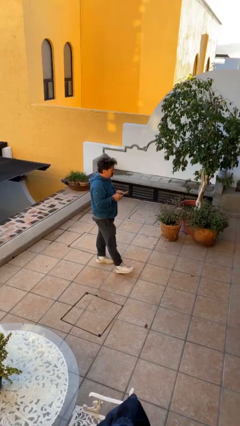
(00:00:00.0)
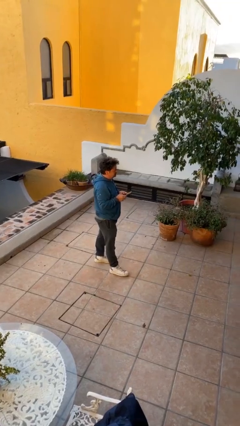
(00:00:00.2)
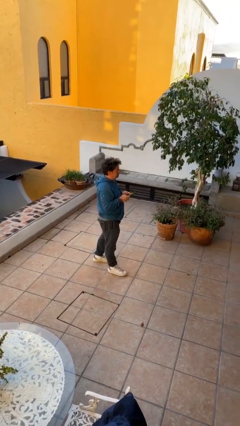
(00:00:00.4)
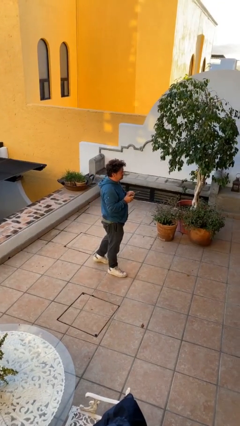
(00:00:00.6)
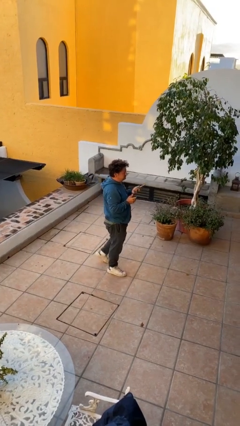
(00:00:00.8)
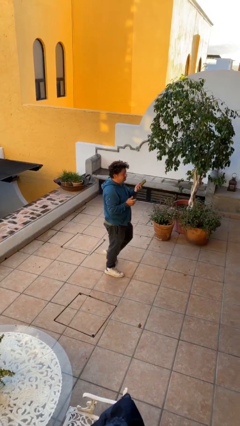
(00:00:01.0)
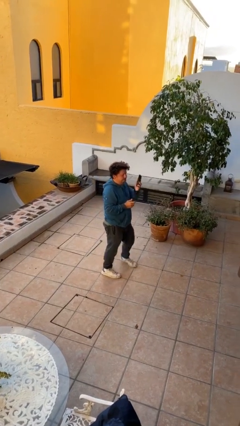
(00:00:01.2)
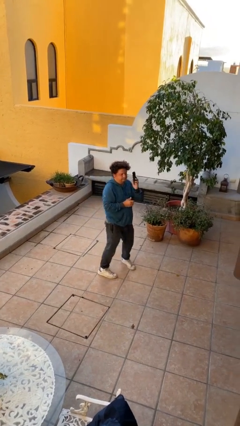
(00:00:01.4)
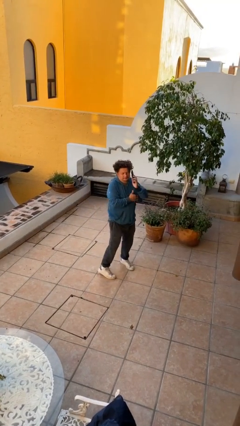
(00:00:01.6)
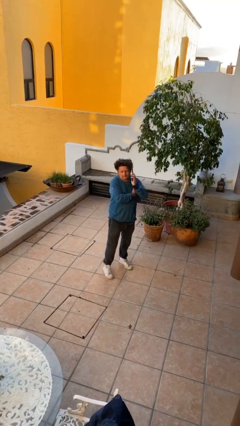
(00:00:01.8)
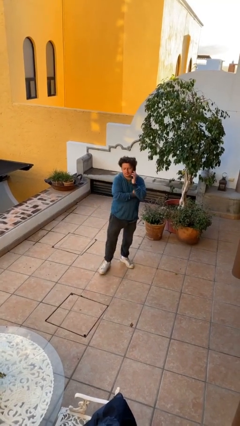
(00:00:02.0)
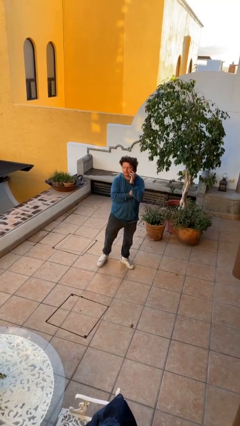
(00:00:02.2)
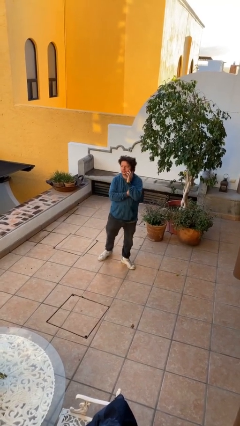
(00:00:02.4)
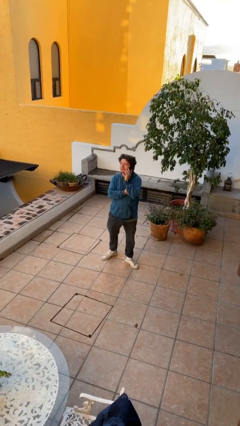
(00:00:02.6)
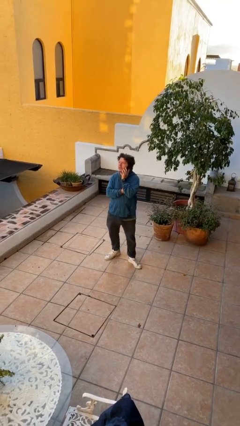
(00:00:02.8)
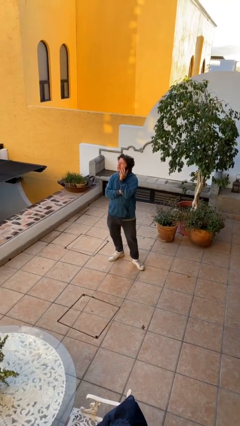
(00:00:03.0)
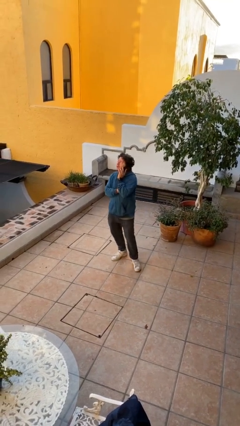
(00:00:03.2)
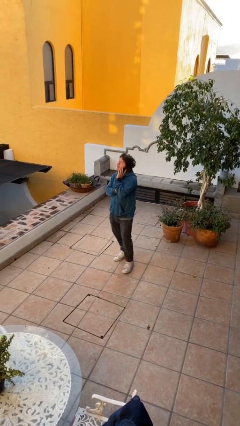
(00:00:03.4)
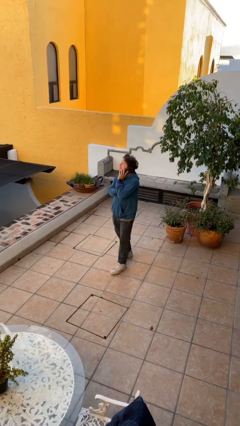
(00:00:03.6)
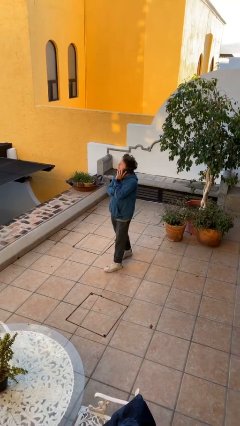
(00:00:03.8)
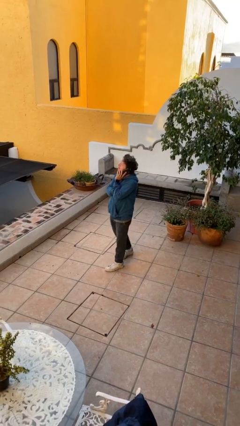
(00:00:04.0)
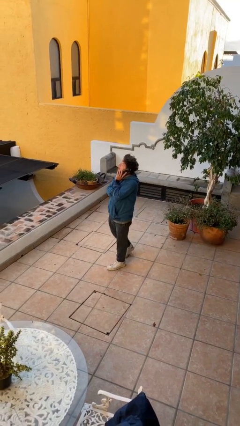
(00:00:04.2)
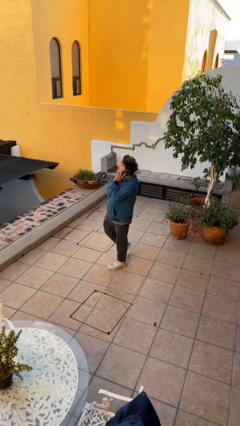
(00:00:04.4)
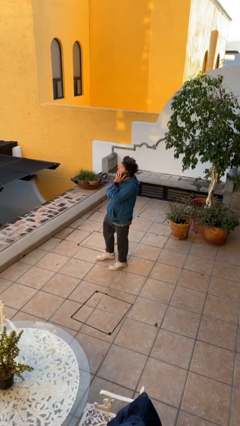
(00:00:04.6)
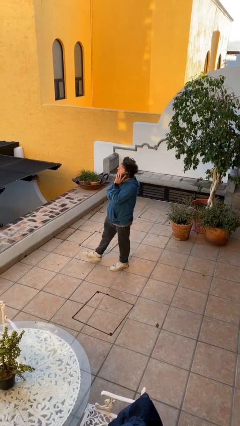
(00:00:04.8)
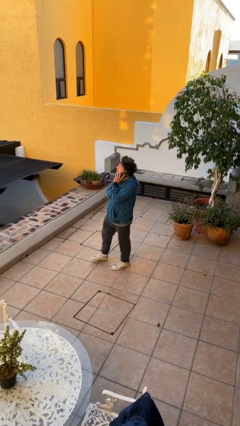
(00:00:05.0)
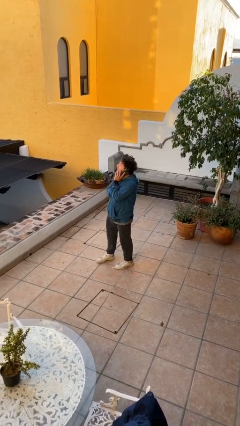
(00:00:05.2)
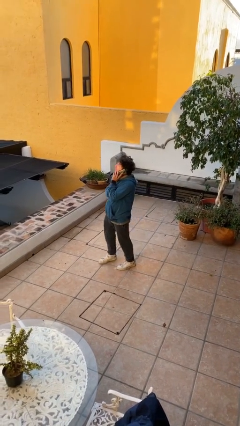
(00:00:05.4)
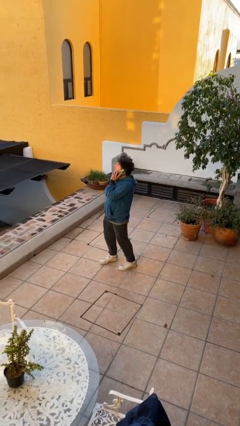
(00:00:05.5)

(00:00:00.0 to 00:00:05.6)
person talks on phone

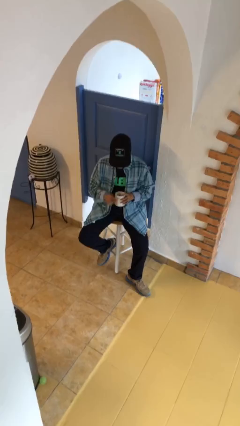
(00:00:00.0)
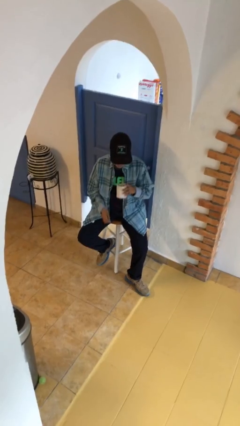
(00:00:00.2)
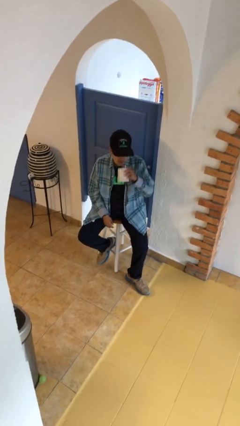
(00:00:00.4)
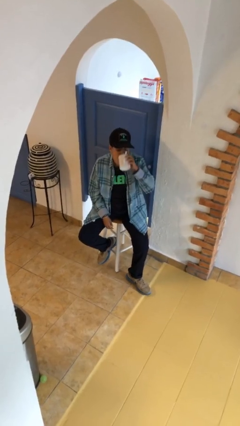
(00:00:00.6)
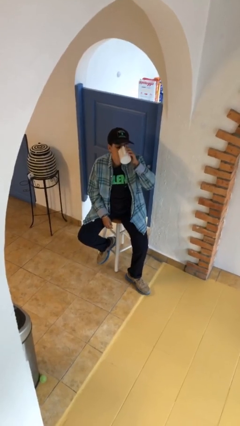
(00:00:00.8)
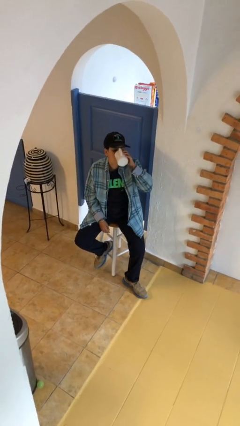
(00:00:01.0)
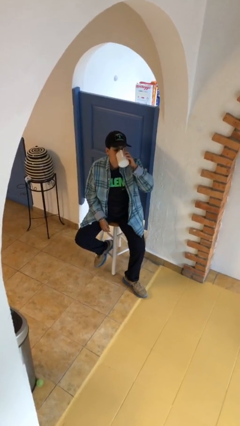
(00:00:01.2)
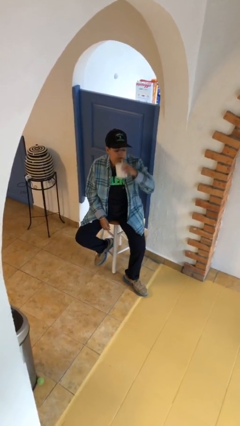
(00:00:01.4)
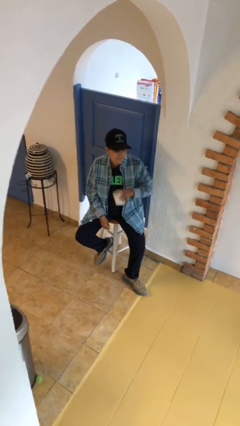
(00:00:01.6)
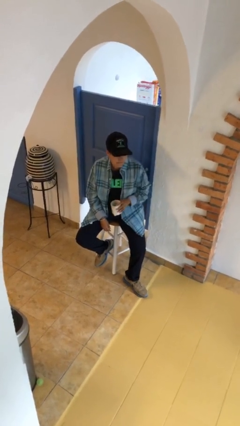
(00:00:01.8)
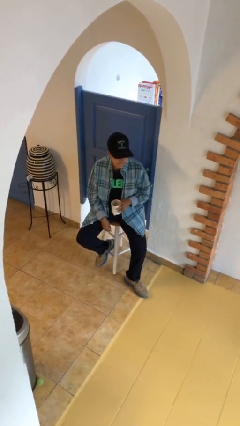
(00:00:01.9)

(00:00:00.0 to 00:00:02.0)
person drinks from mug

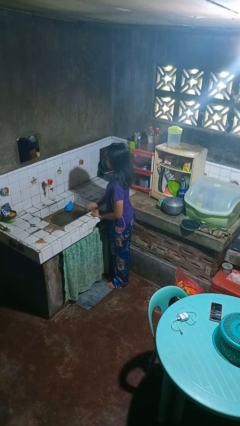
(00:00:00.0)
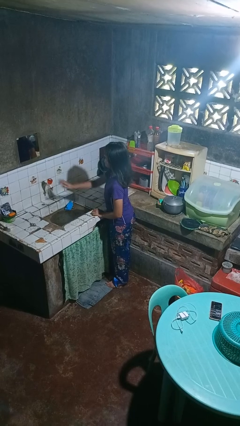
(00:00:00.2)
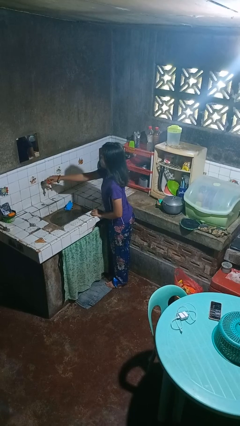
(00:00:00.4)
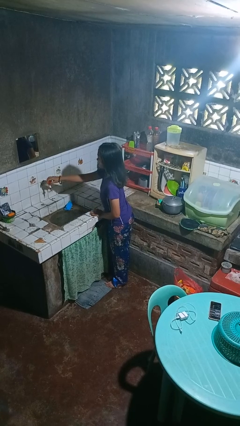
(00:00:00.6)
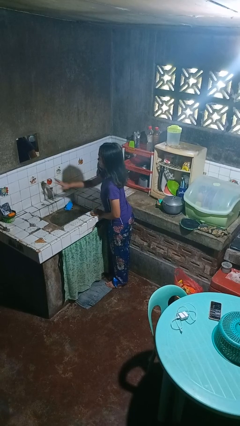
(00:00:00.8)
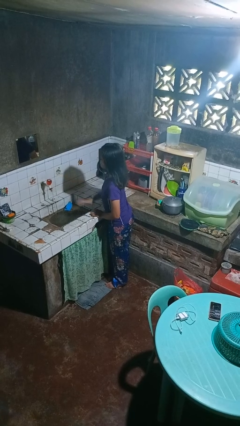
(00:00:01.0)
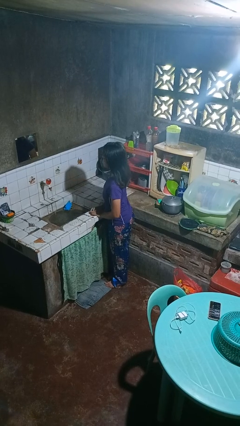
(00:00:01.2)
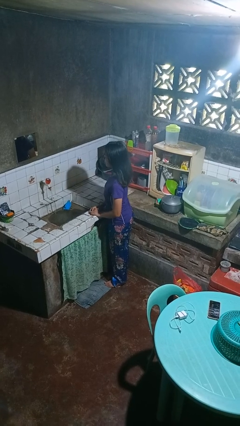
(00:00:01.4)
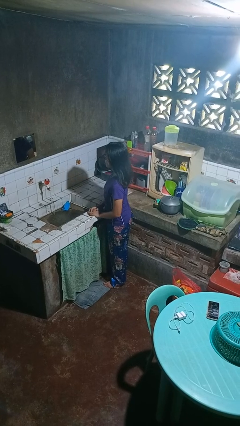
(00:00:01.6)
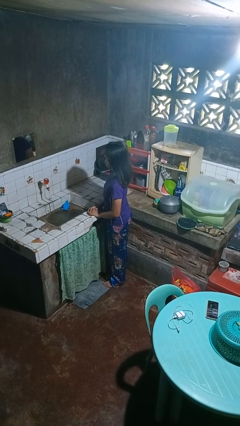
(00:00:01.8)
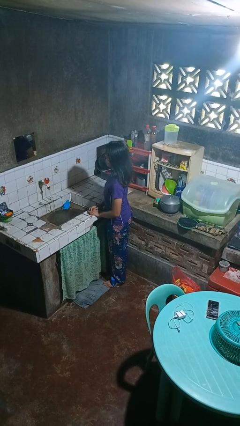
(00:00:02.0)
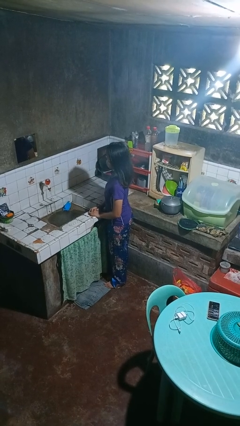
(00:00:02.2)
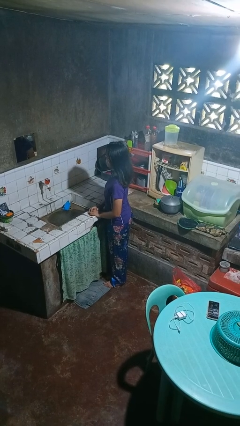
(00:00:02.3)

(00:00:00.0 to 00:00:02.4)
person turns on faucet

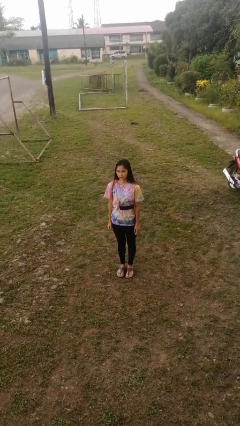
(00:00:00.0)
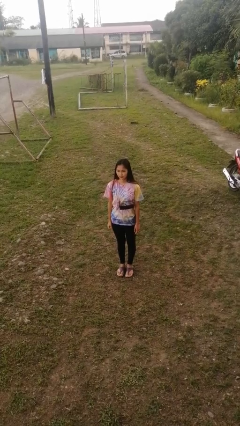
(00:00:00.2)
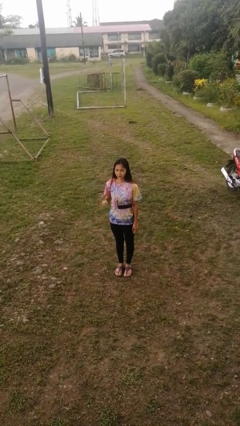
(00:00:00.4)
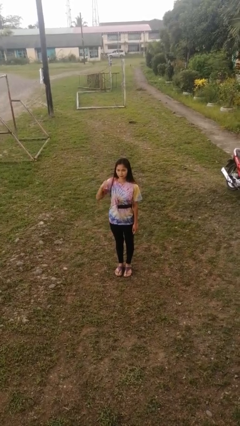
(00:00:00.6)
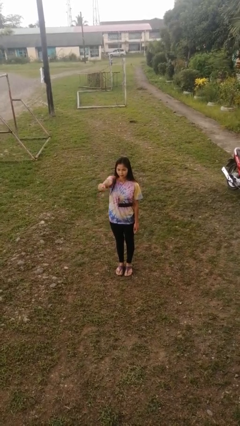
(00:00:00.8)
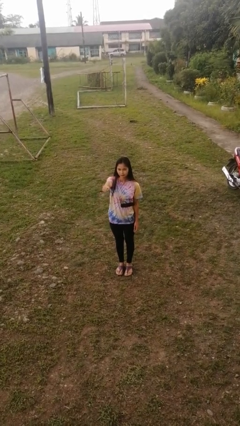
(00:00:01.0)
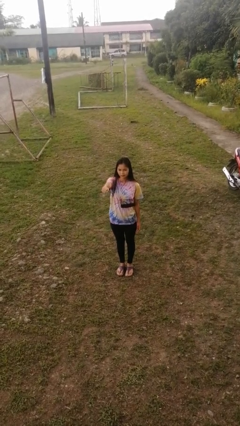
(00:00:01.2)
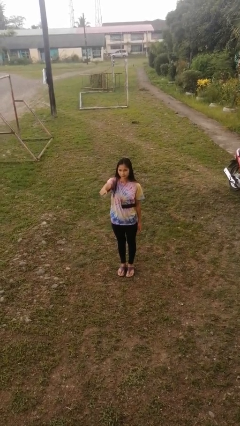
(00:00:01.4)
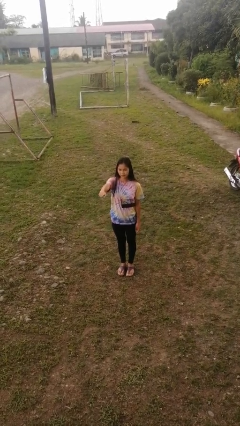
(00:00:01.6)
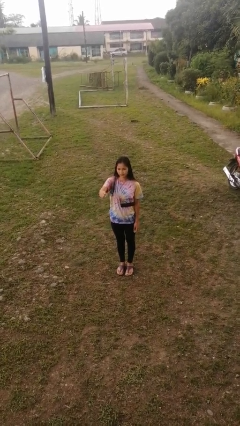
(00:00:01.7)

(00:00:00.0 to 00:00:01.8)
person punches

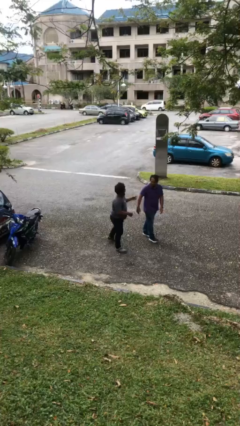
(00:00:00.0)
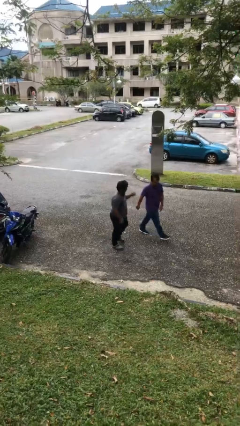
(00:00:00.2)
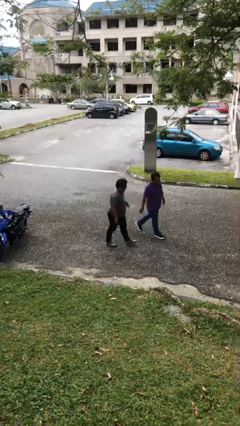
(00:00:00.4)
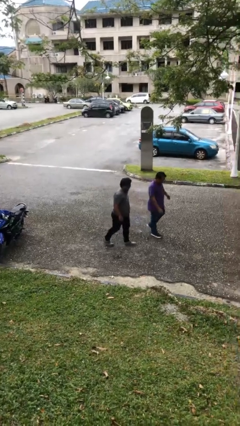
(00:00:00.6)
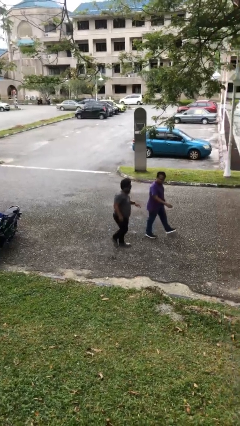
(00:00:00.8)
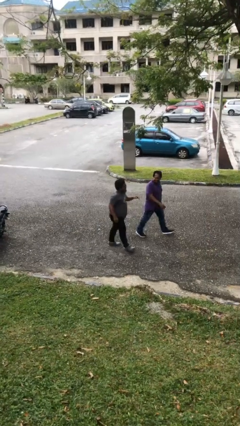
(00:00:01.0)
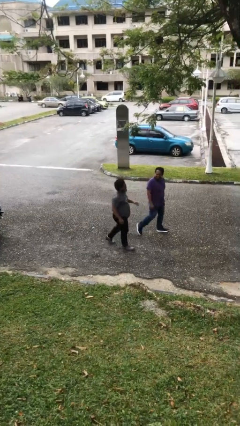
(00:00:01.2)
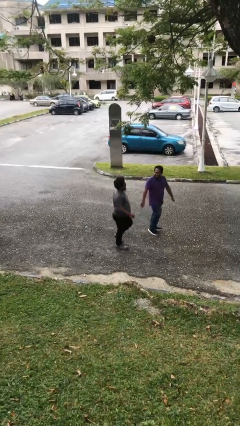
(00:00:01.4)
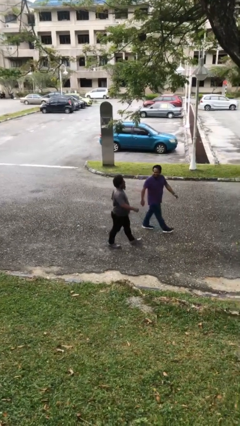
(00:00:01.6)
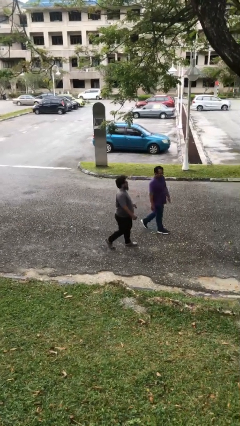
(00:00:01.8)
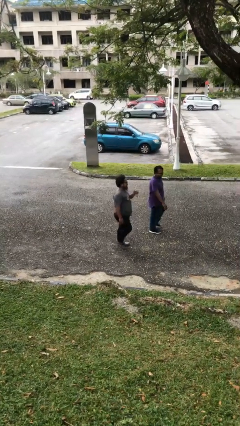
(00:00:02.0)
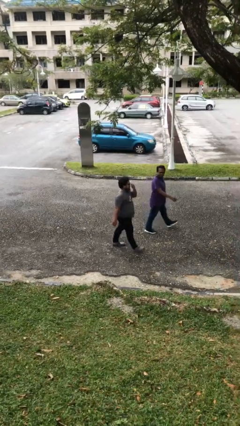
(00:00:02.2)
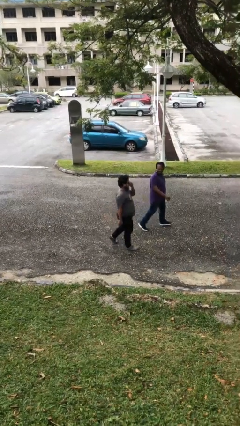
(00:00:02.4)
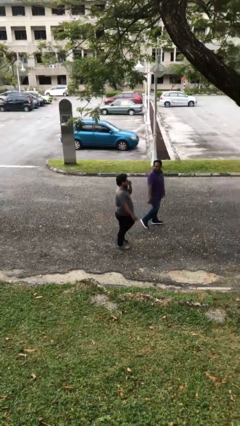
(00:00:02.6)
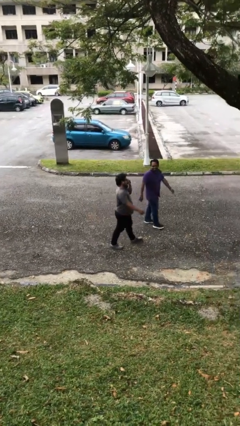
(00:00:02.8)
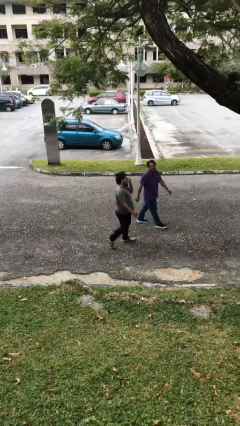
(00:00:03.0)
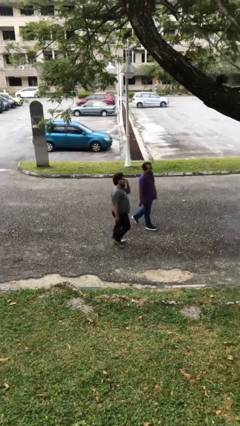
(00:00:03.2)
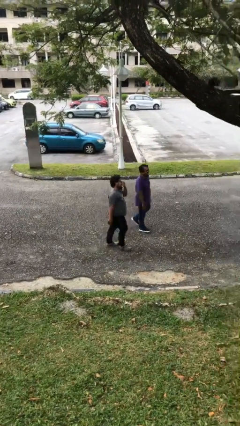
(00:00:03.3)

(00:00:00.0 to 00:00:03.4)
person talks to person

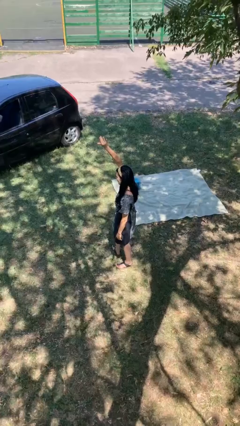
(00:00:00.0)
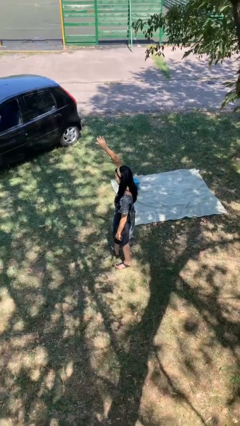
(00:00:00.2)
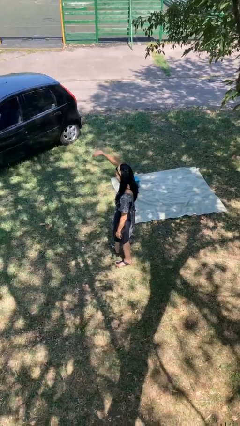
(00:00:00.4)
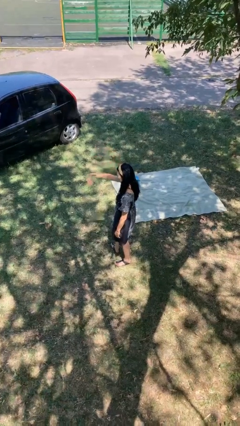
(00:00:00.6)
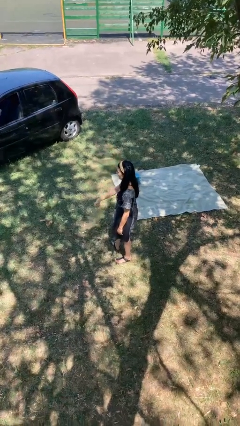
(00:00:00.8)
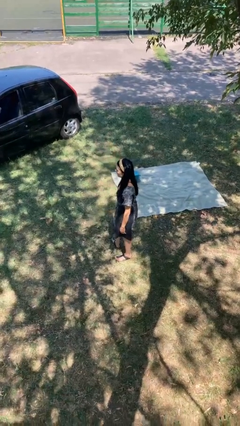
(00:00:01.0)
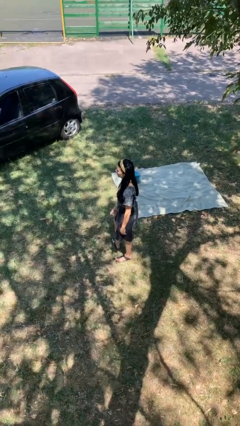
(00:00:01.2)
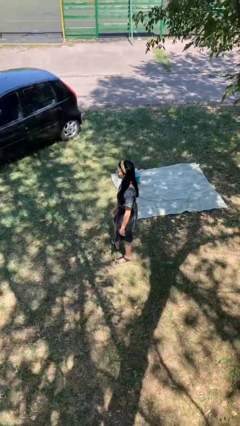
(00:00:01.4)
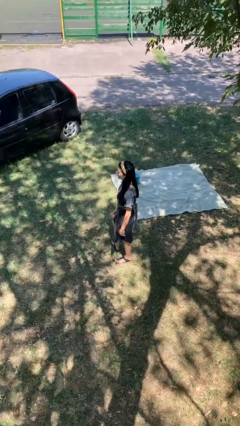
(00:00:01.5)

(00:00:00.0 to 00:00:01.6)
person gestures lower hand
